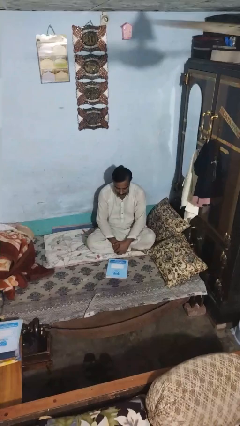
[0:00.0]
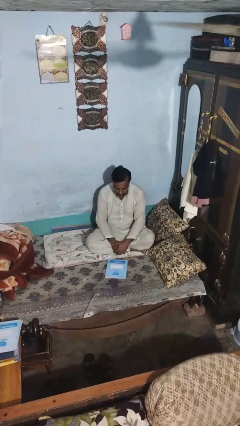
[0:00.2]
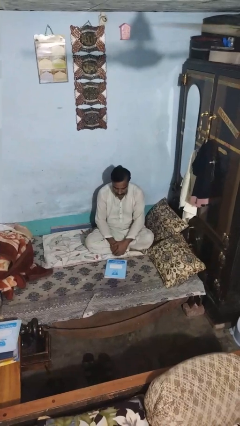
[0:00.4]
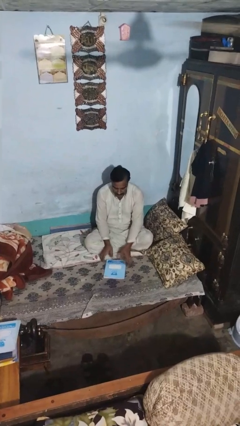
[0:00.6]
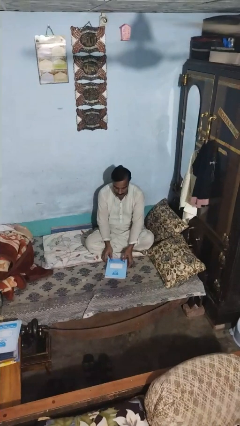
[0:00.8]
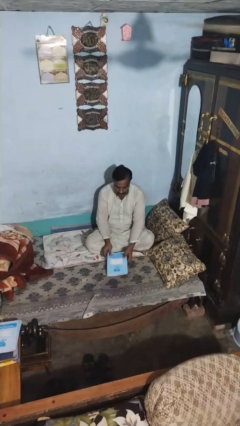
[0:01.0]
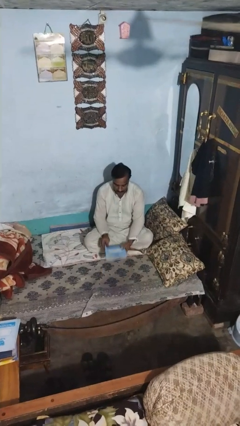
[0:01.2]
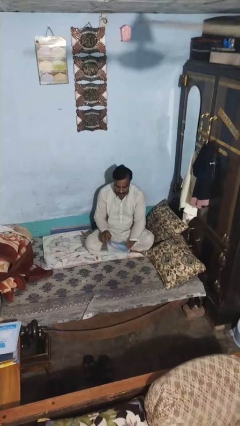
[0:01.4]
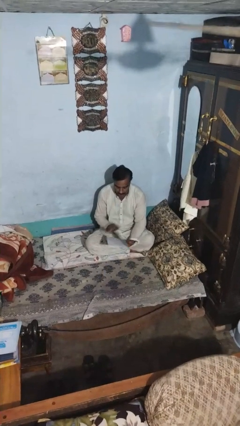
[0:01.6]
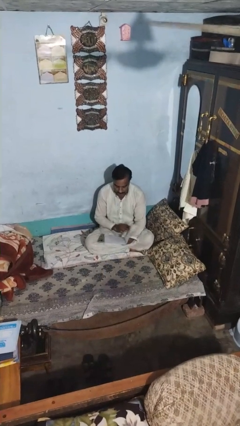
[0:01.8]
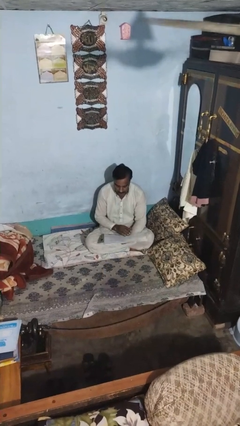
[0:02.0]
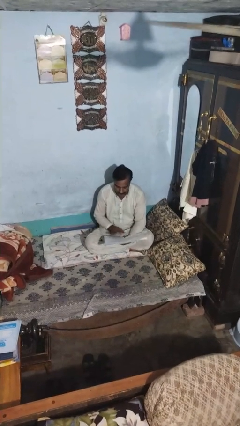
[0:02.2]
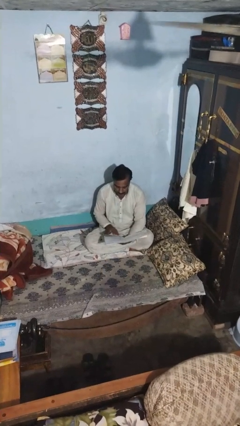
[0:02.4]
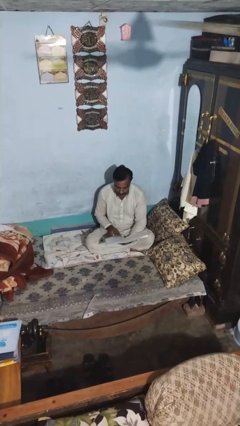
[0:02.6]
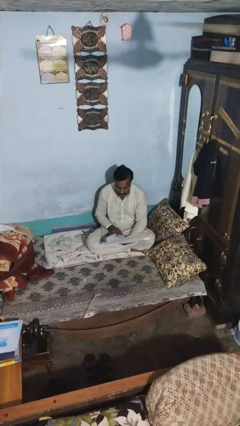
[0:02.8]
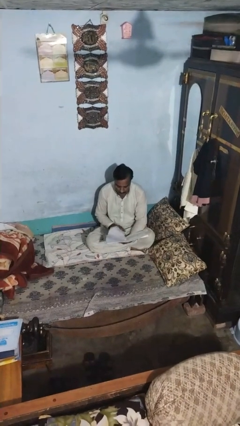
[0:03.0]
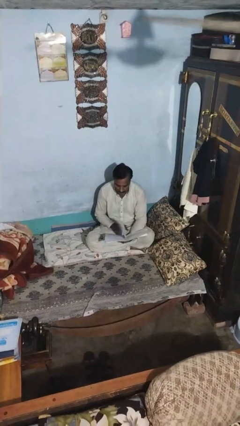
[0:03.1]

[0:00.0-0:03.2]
person reads book

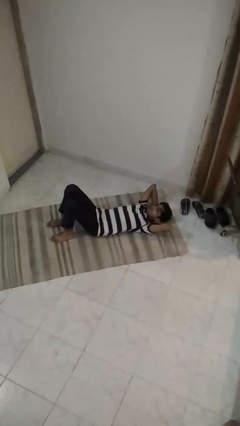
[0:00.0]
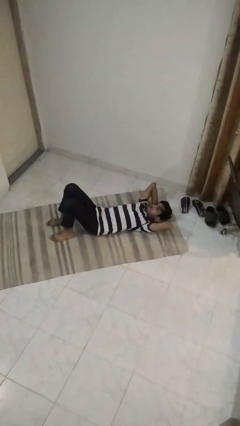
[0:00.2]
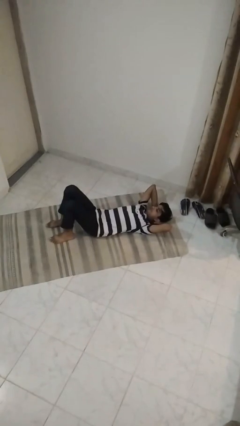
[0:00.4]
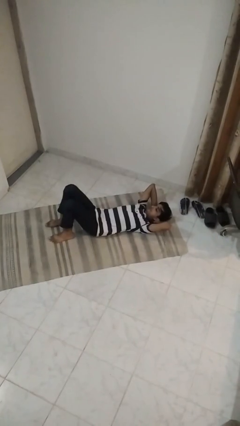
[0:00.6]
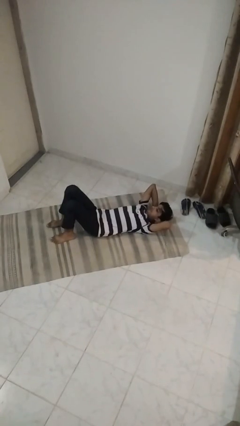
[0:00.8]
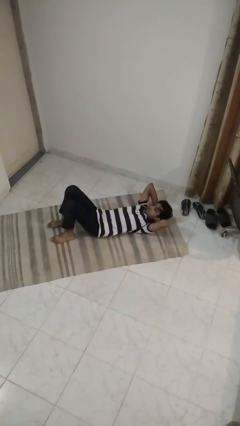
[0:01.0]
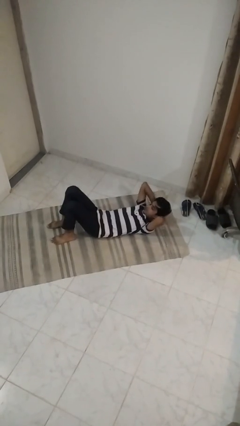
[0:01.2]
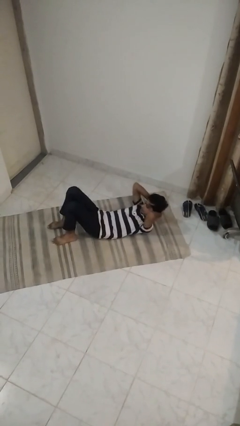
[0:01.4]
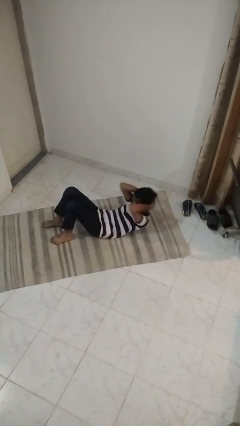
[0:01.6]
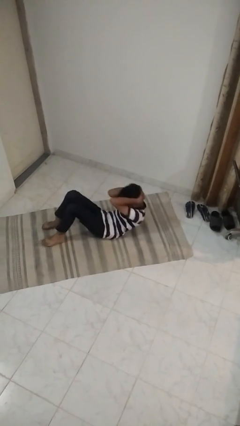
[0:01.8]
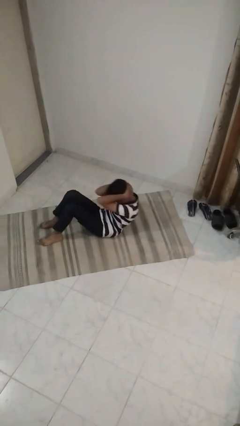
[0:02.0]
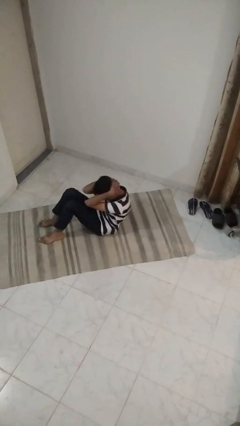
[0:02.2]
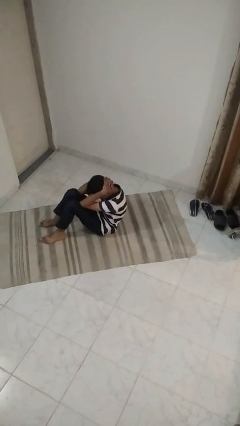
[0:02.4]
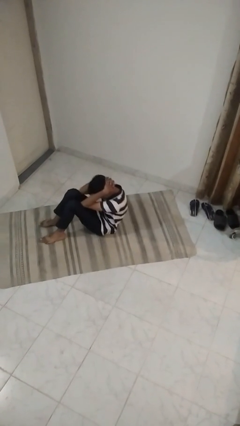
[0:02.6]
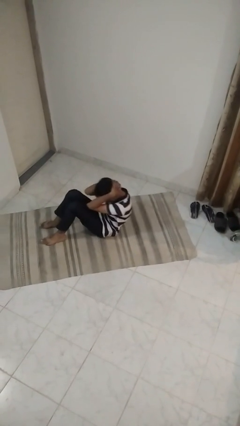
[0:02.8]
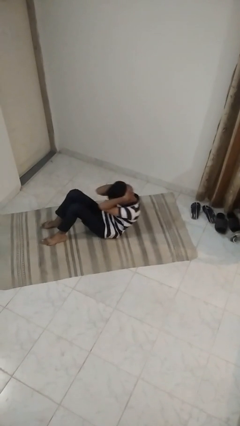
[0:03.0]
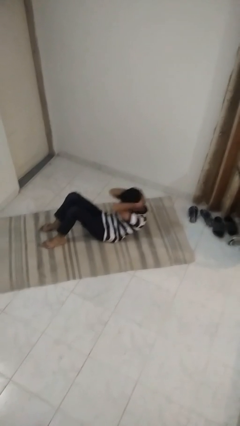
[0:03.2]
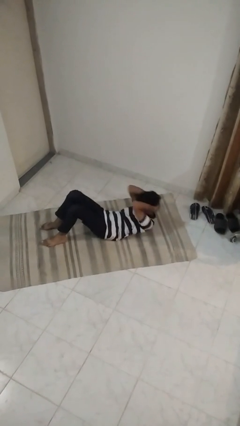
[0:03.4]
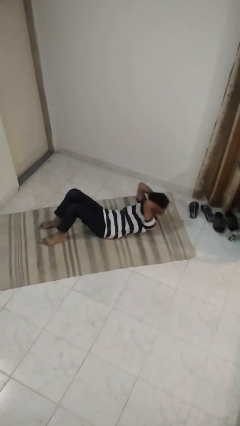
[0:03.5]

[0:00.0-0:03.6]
person exercises with situp

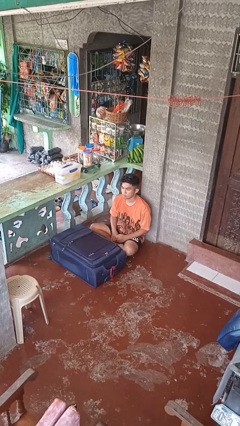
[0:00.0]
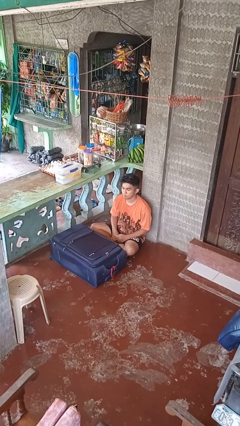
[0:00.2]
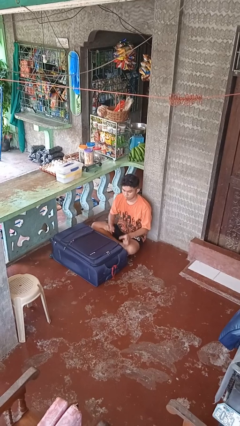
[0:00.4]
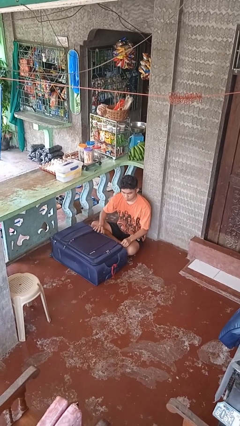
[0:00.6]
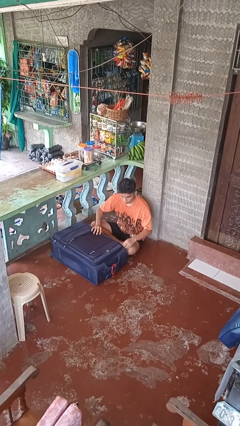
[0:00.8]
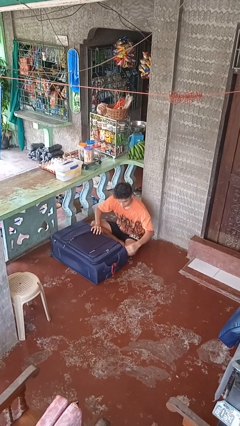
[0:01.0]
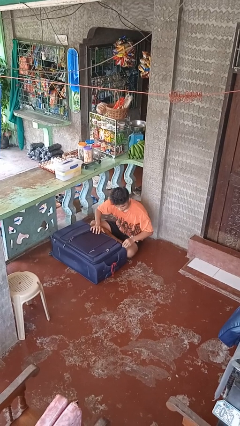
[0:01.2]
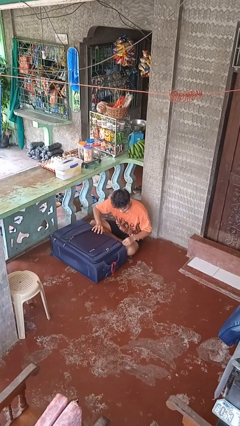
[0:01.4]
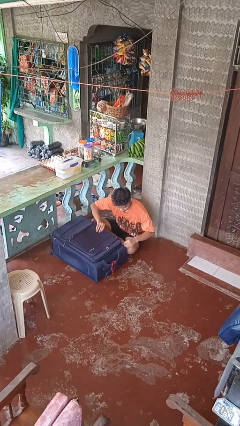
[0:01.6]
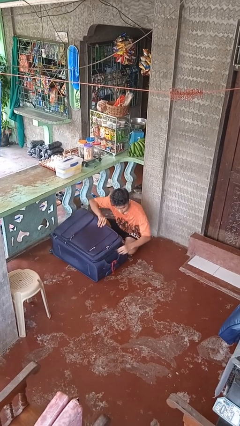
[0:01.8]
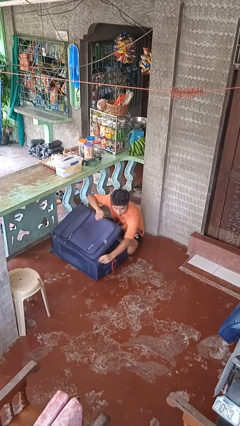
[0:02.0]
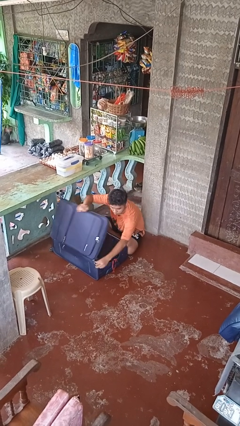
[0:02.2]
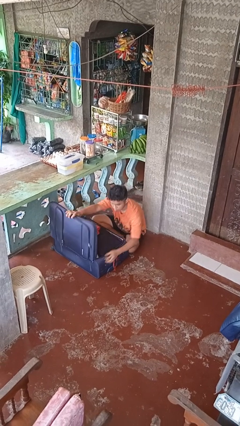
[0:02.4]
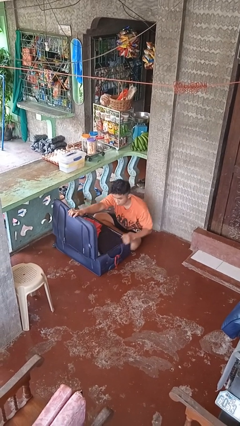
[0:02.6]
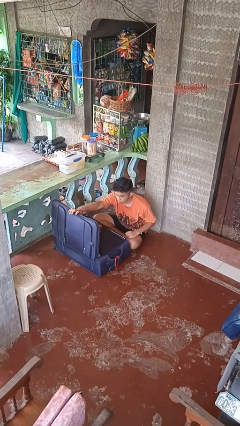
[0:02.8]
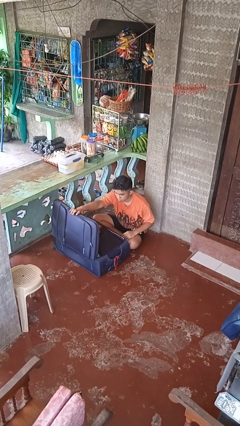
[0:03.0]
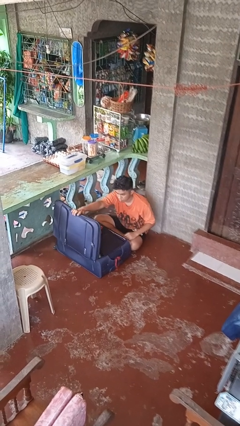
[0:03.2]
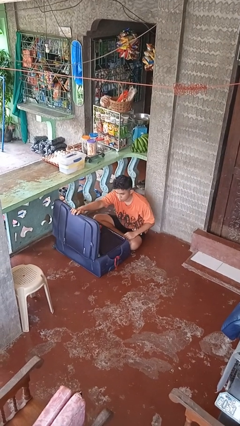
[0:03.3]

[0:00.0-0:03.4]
person opens suitcase

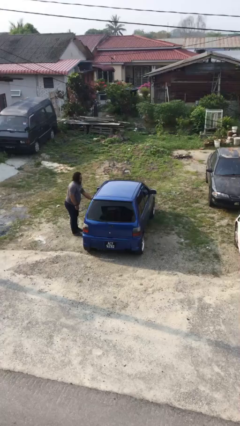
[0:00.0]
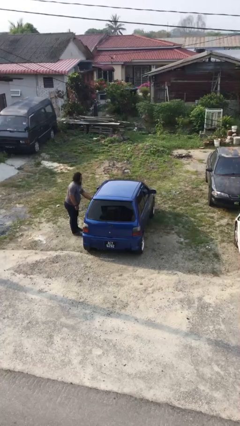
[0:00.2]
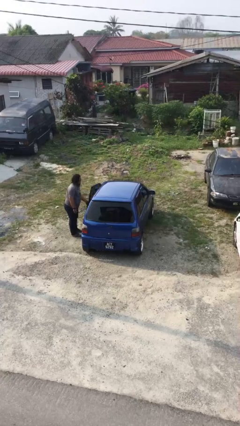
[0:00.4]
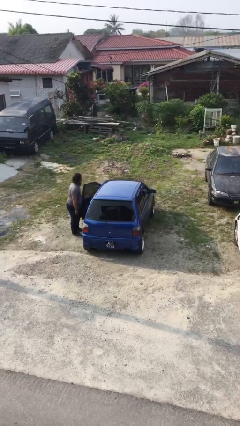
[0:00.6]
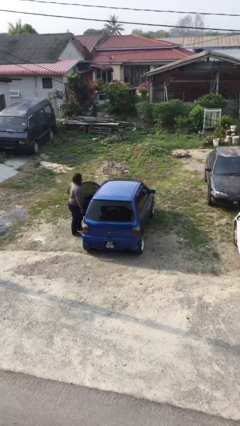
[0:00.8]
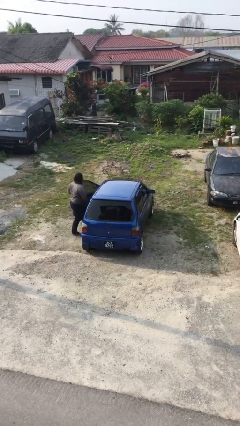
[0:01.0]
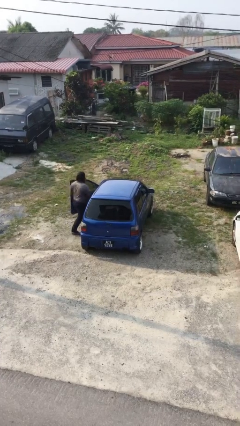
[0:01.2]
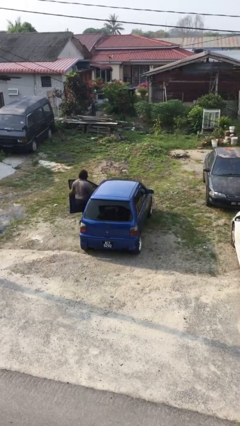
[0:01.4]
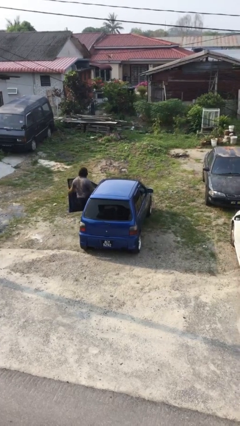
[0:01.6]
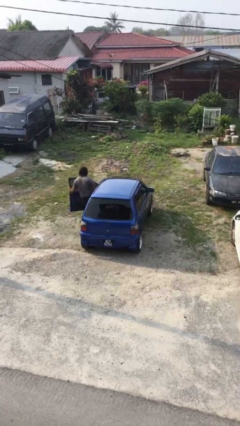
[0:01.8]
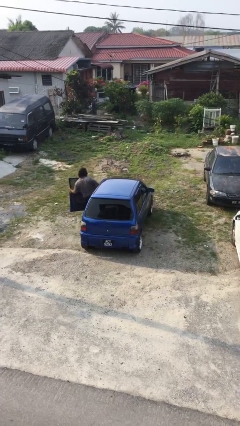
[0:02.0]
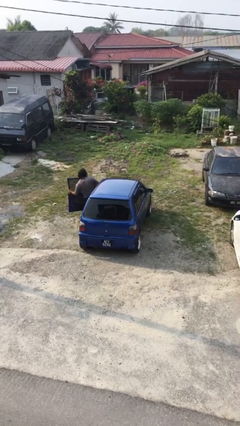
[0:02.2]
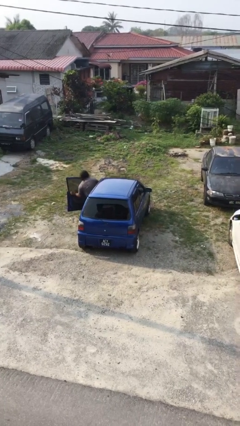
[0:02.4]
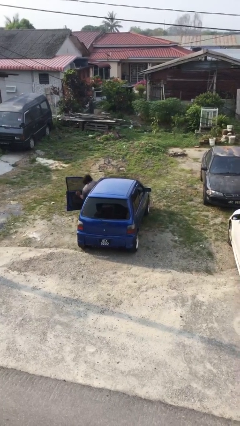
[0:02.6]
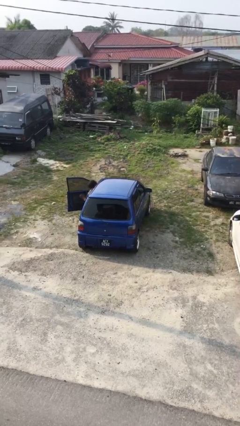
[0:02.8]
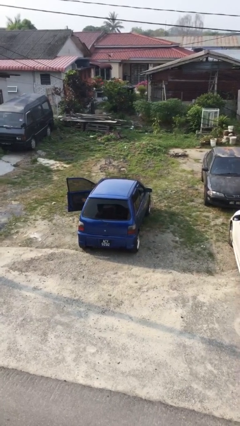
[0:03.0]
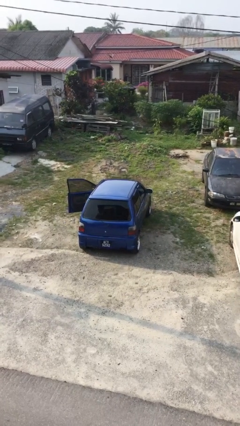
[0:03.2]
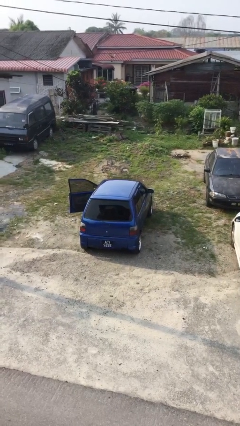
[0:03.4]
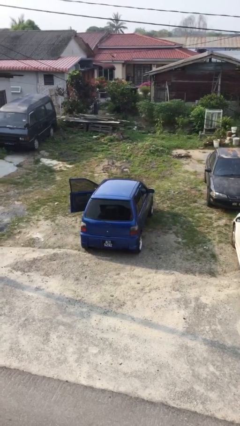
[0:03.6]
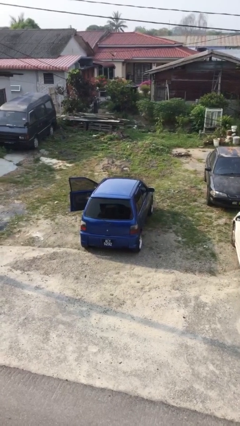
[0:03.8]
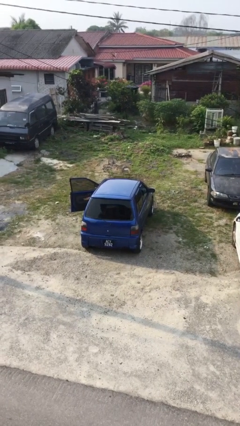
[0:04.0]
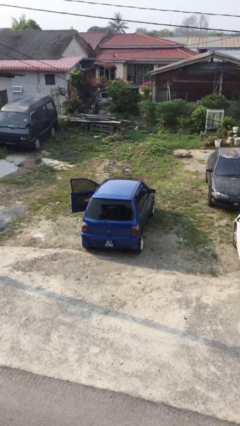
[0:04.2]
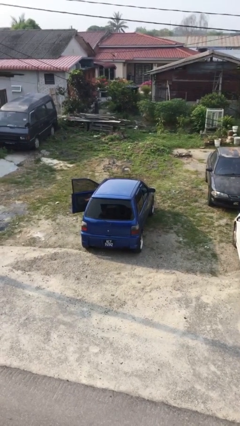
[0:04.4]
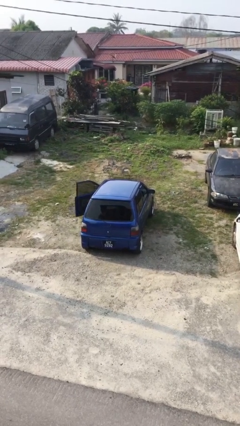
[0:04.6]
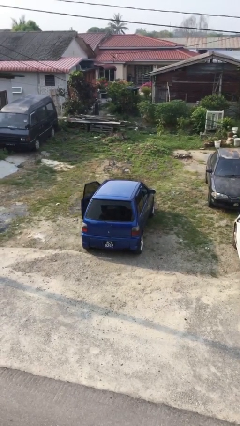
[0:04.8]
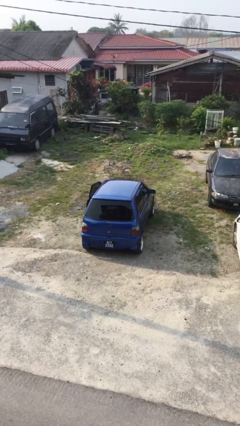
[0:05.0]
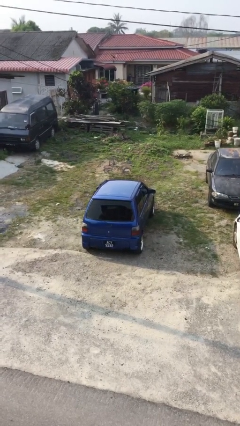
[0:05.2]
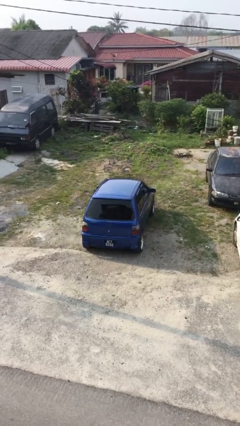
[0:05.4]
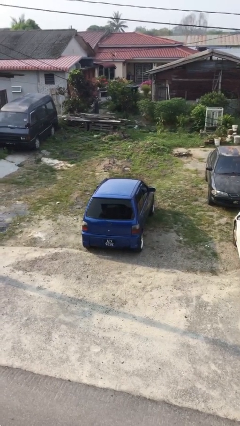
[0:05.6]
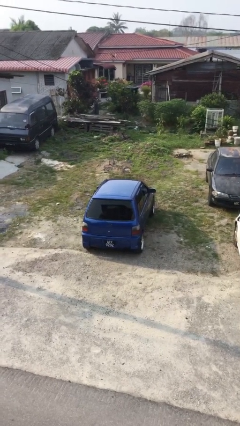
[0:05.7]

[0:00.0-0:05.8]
car picks up person

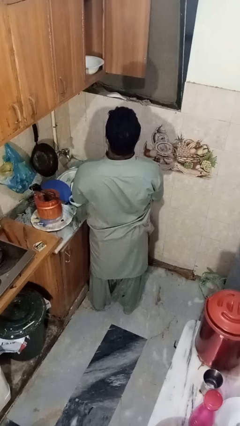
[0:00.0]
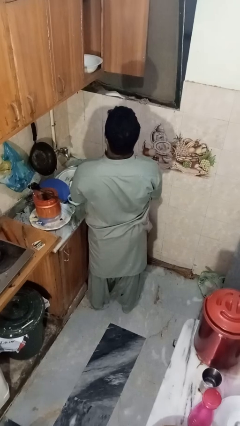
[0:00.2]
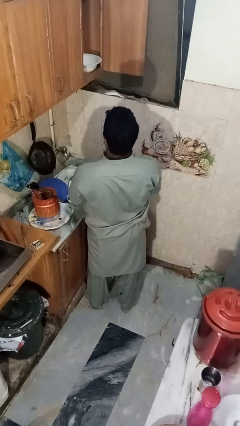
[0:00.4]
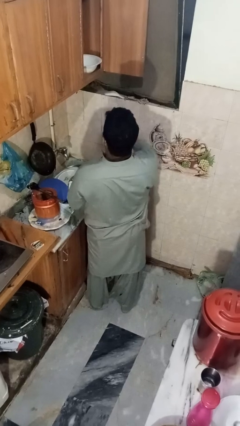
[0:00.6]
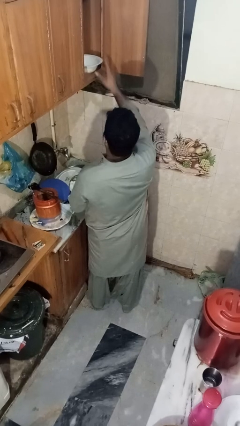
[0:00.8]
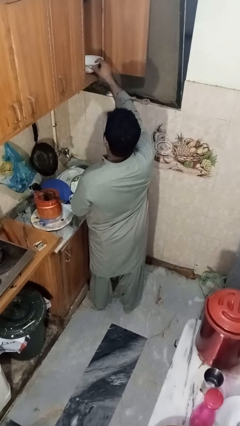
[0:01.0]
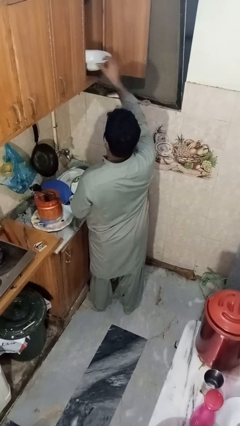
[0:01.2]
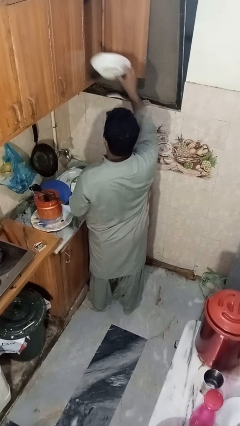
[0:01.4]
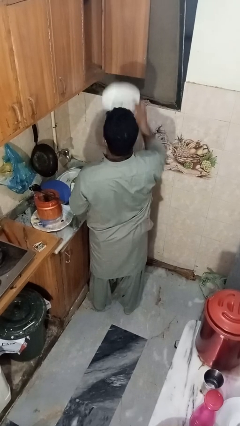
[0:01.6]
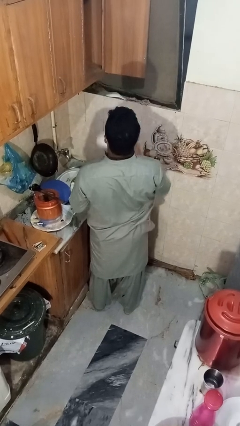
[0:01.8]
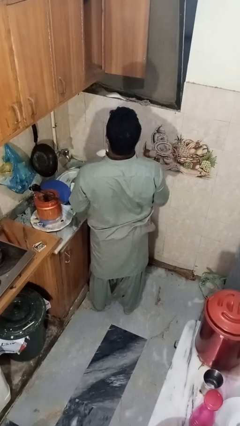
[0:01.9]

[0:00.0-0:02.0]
person takes object from cabinet
